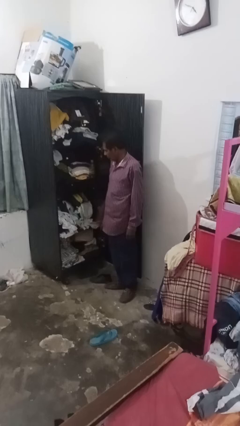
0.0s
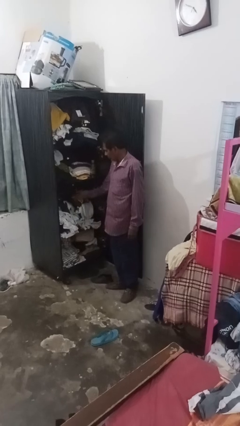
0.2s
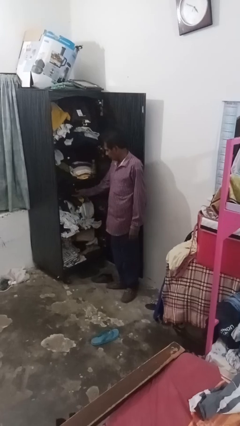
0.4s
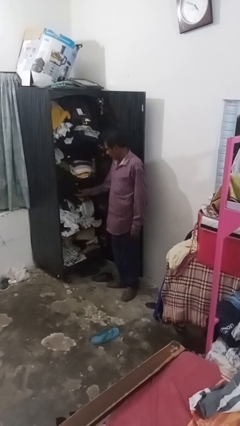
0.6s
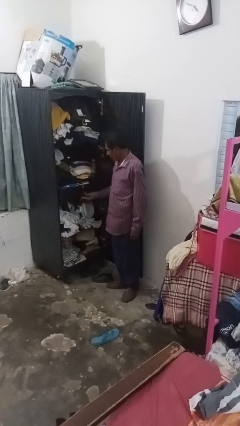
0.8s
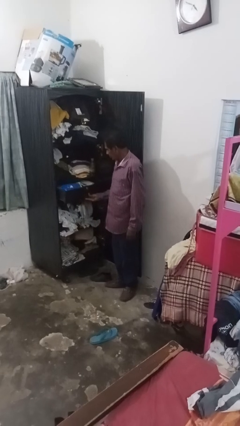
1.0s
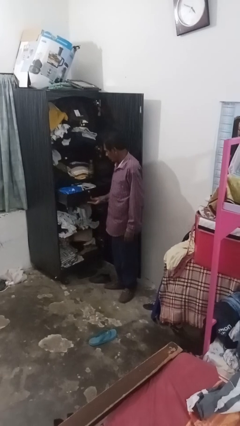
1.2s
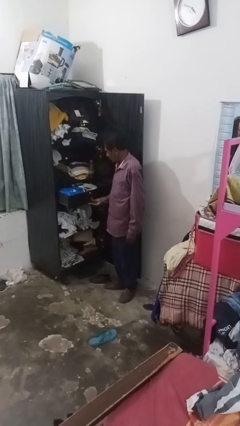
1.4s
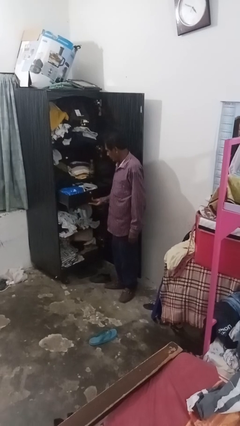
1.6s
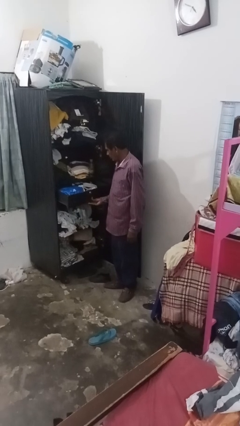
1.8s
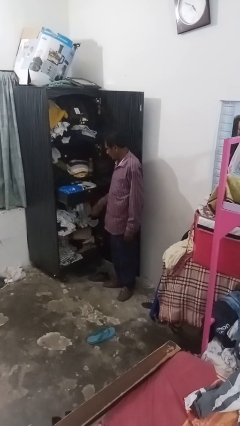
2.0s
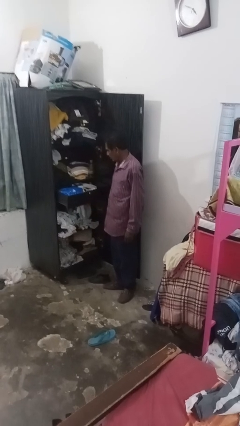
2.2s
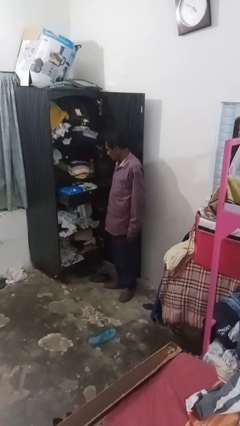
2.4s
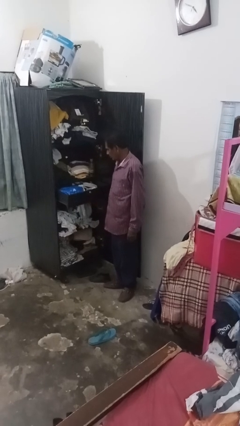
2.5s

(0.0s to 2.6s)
person opens dresser drawer

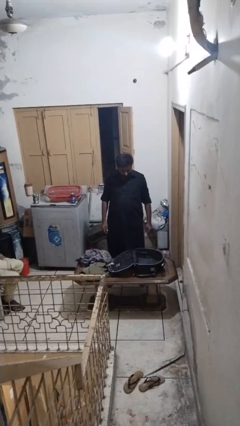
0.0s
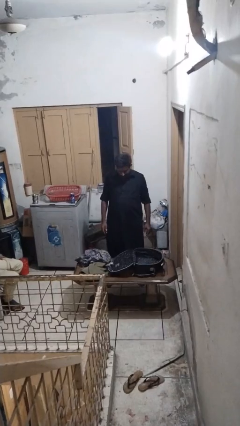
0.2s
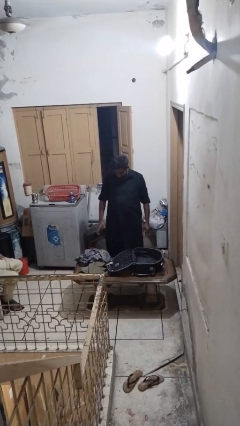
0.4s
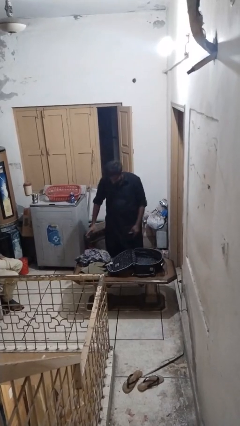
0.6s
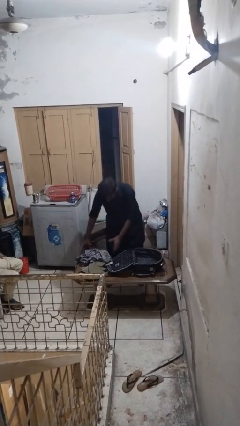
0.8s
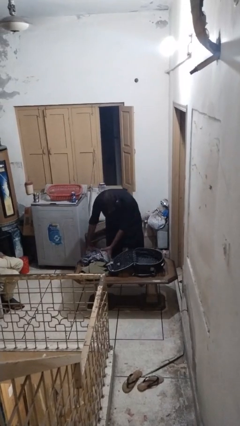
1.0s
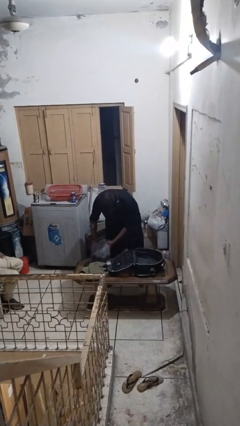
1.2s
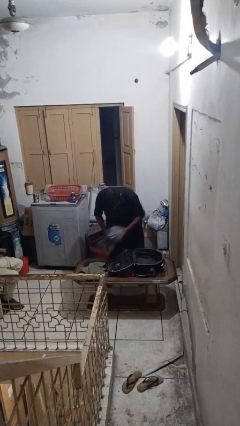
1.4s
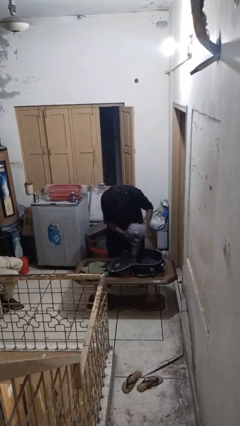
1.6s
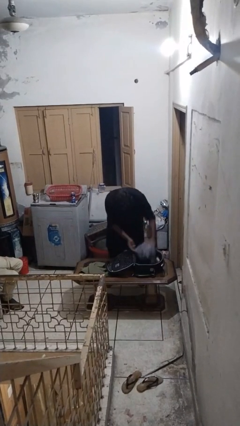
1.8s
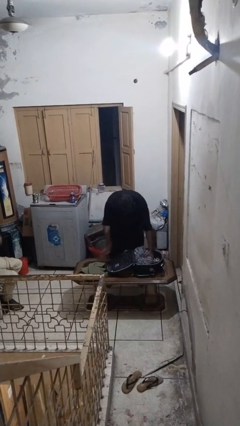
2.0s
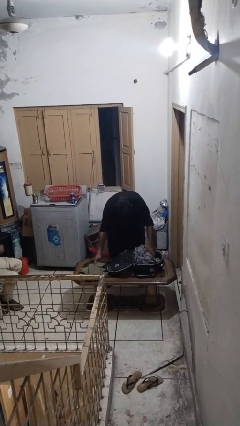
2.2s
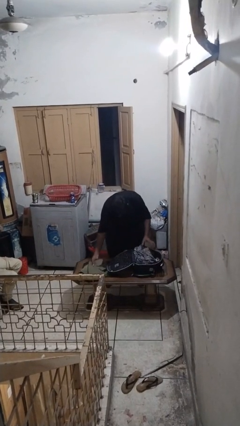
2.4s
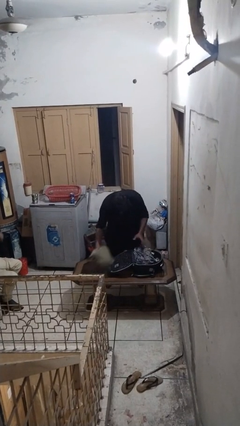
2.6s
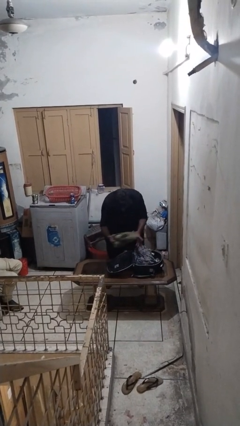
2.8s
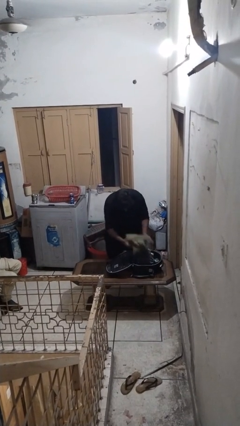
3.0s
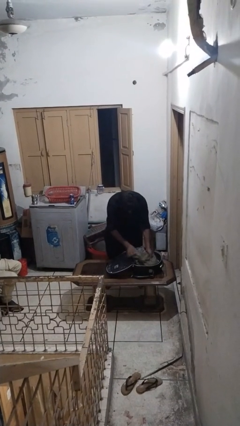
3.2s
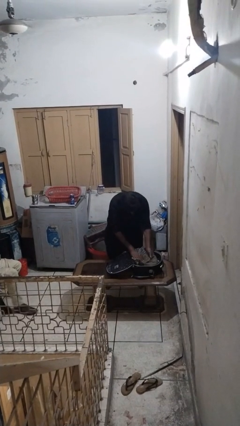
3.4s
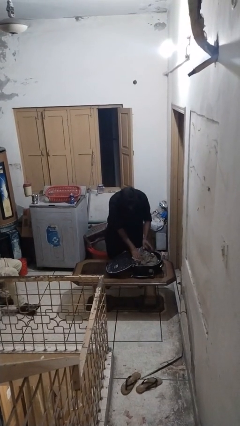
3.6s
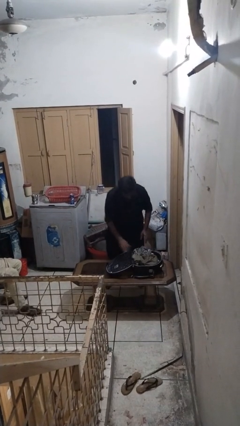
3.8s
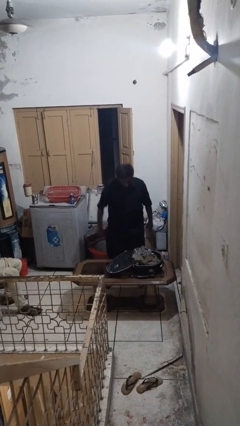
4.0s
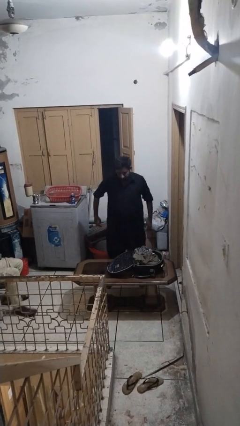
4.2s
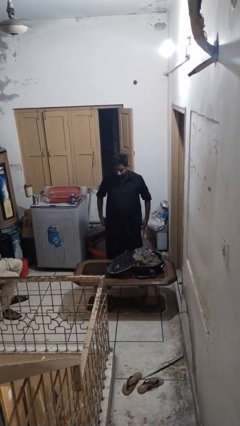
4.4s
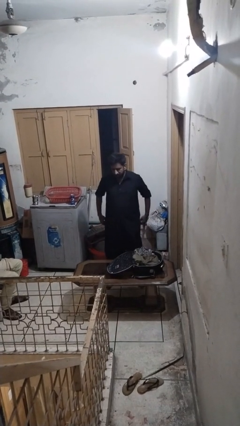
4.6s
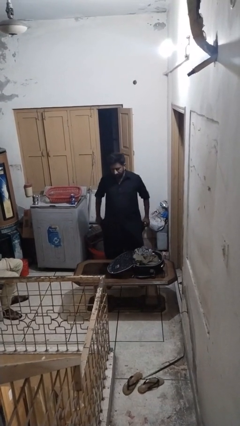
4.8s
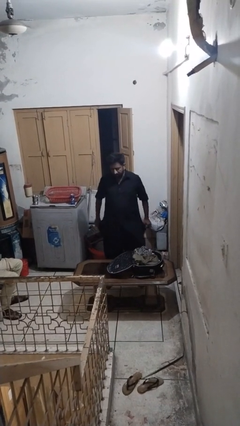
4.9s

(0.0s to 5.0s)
person loads clothes into suitcase

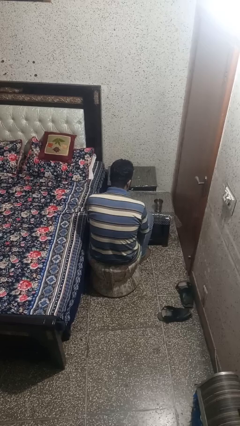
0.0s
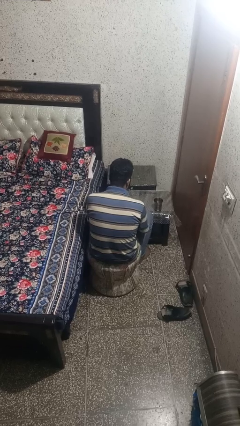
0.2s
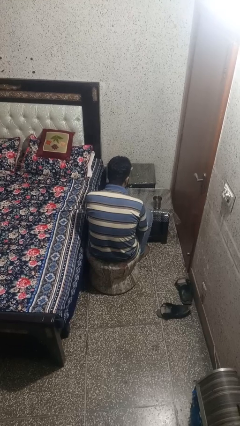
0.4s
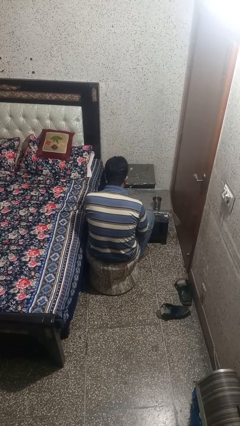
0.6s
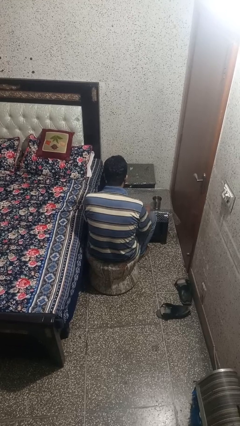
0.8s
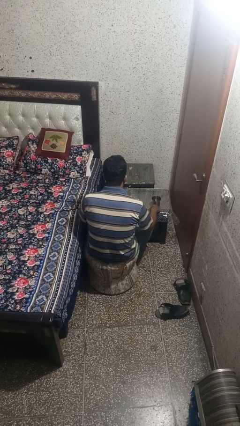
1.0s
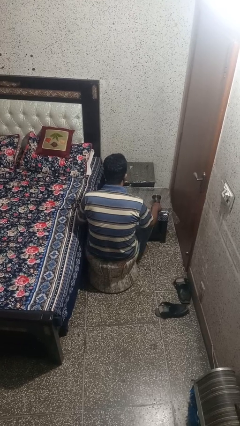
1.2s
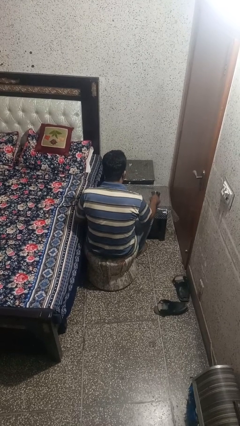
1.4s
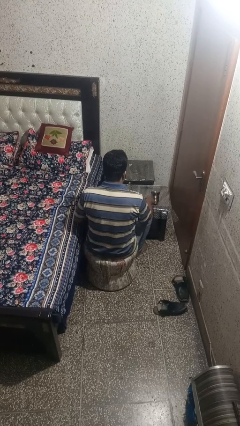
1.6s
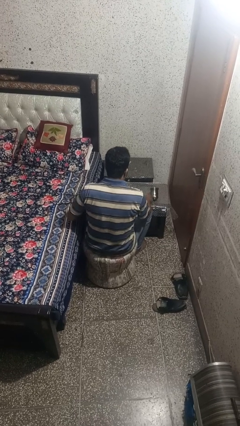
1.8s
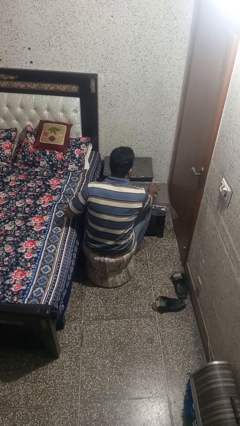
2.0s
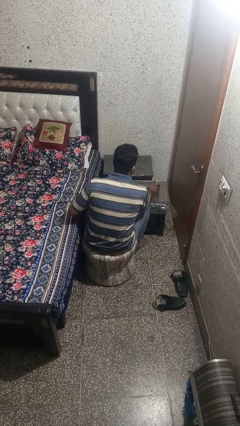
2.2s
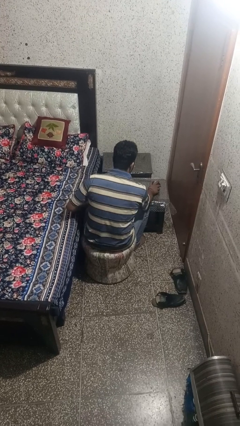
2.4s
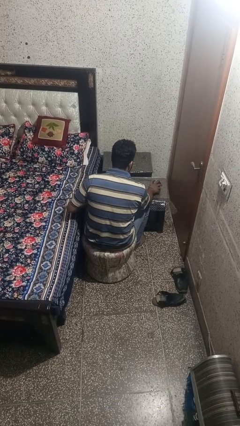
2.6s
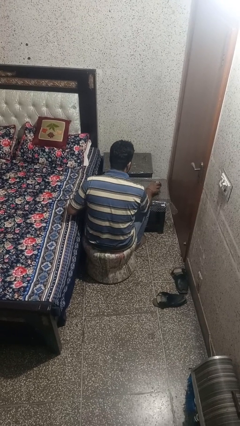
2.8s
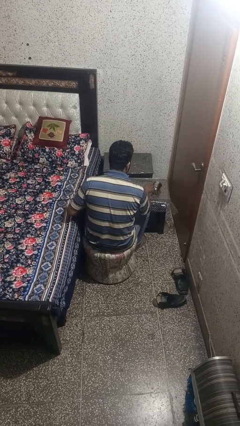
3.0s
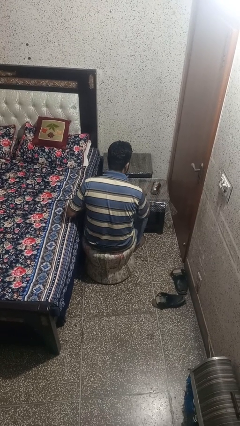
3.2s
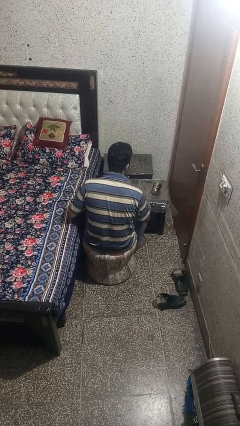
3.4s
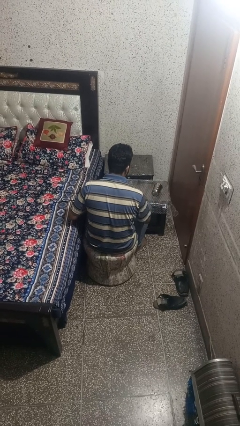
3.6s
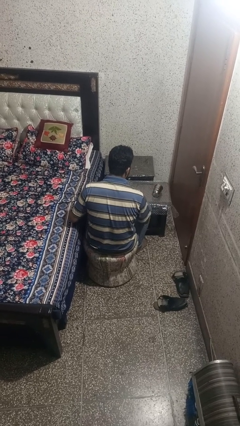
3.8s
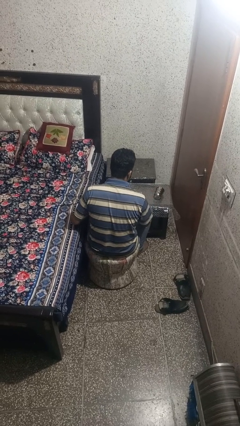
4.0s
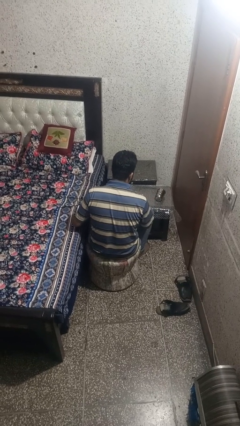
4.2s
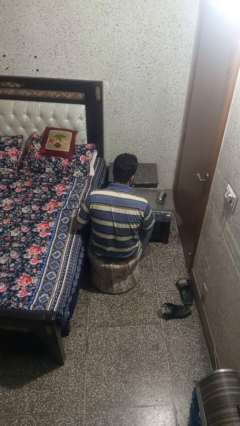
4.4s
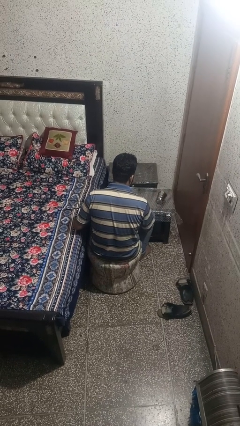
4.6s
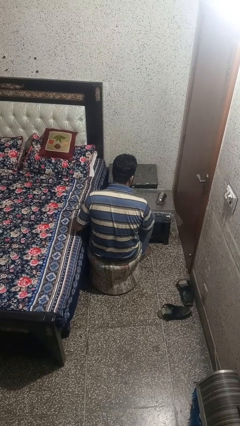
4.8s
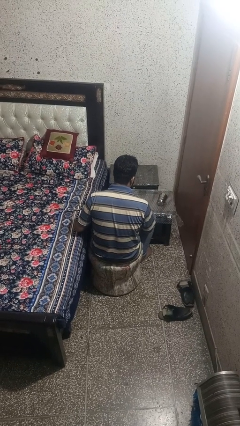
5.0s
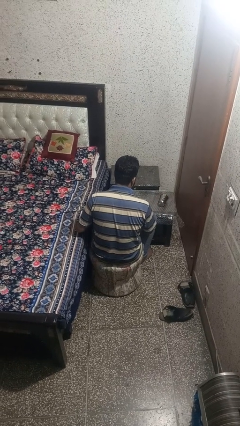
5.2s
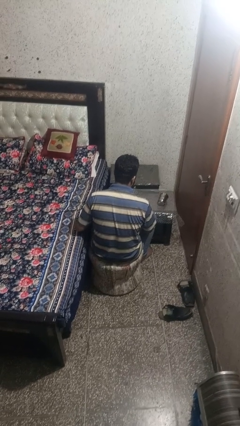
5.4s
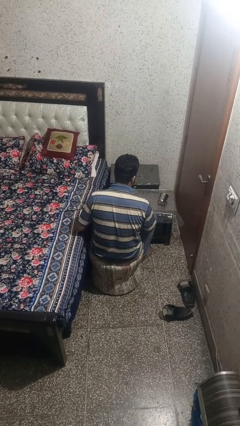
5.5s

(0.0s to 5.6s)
person knocks over glass

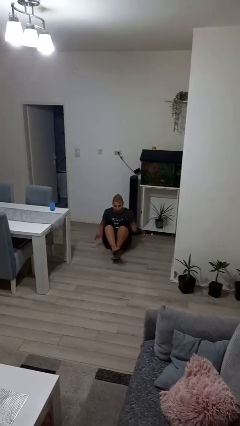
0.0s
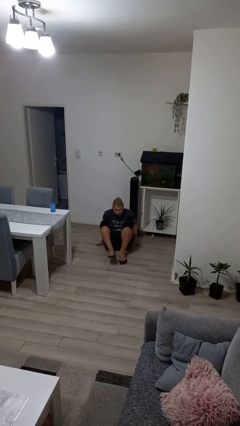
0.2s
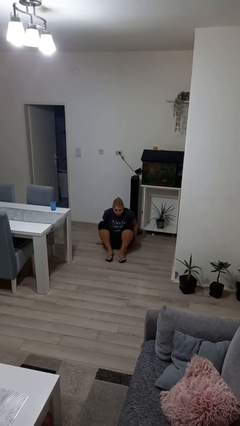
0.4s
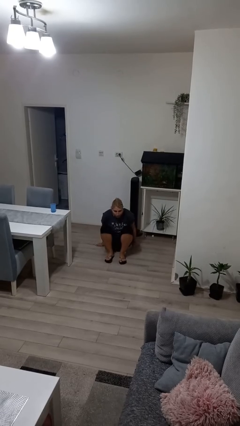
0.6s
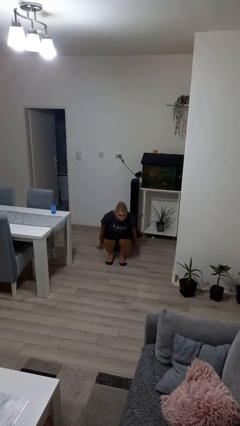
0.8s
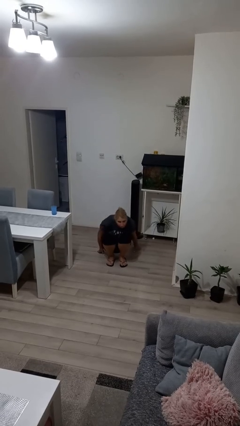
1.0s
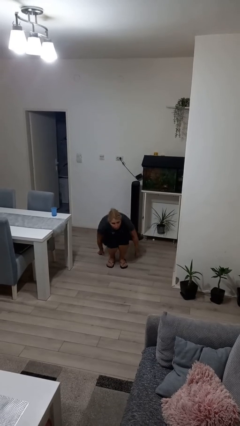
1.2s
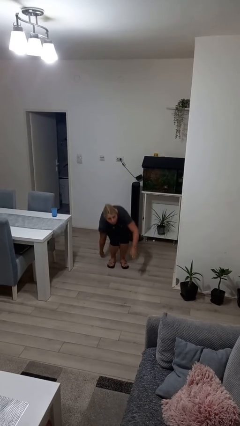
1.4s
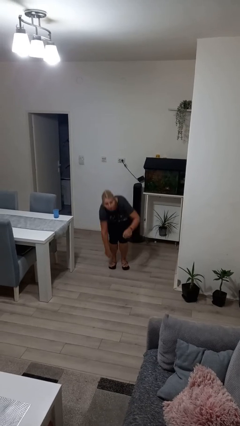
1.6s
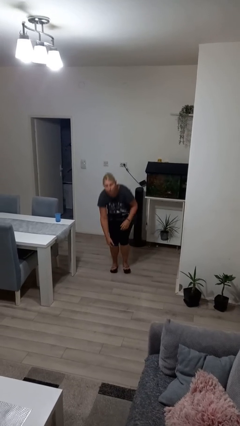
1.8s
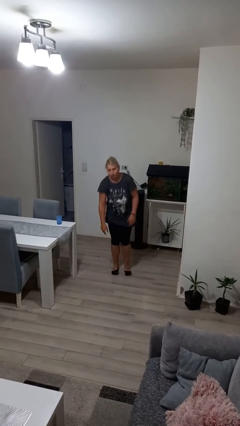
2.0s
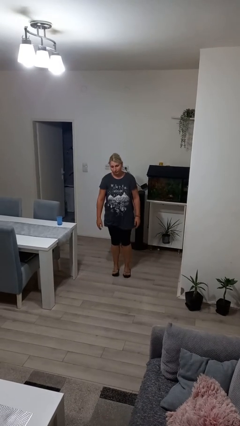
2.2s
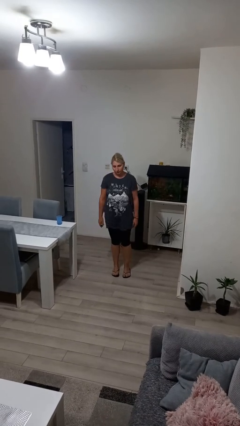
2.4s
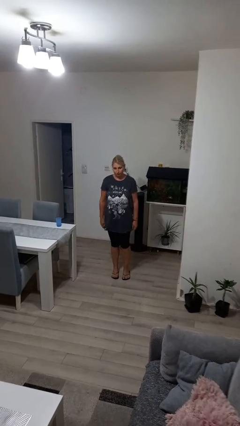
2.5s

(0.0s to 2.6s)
person stands up from floor

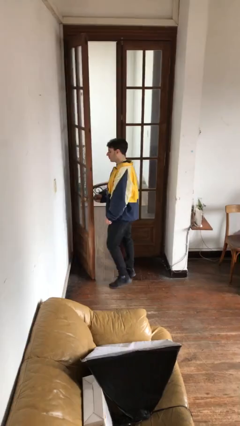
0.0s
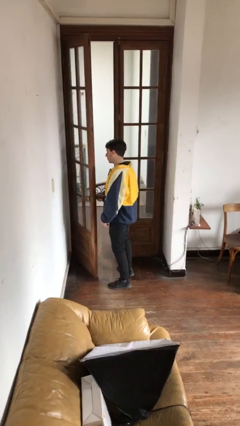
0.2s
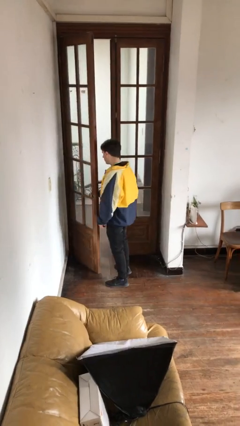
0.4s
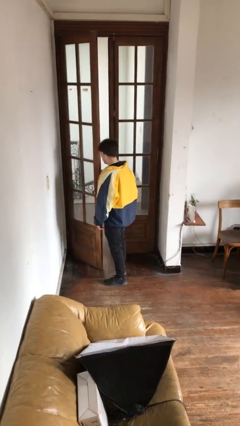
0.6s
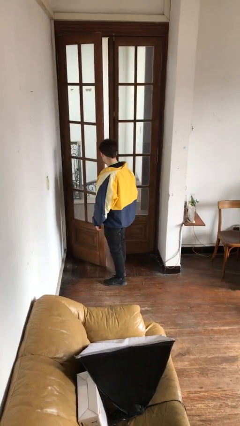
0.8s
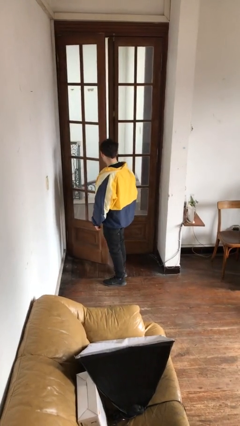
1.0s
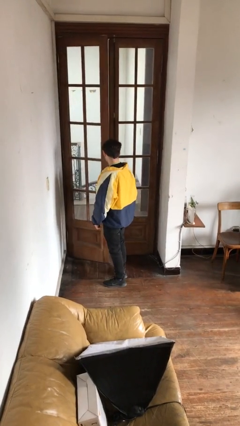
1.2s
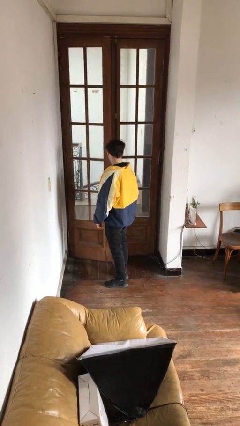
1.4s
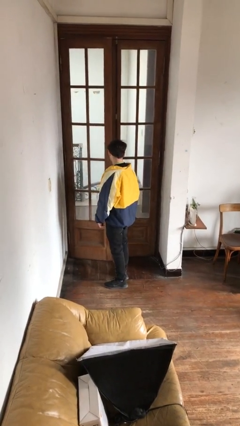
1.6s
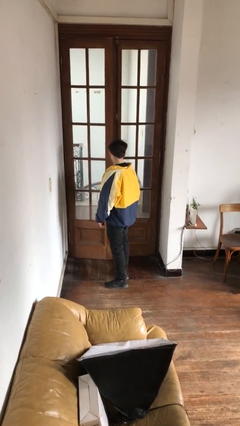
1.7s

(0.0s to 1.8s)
person closes facility door
